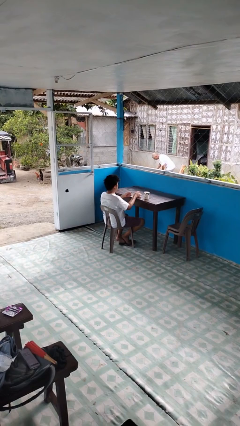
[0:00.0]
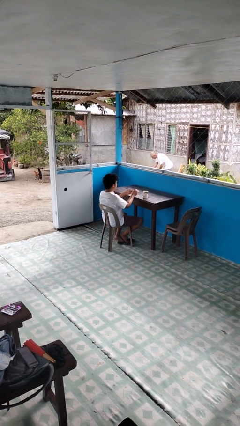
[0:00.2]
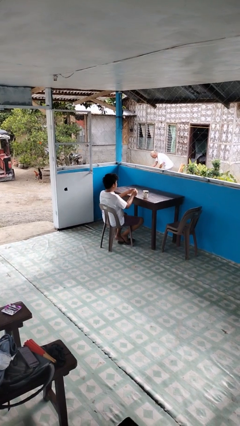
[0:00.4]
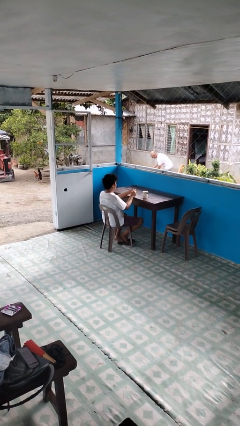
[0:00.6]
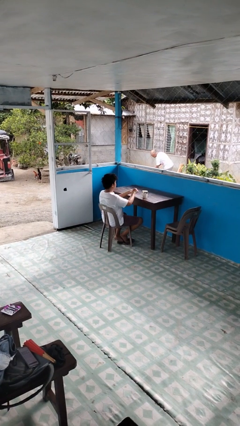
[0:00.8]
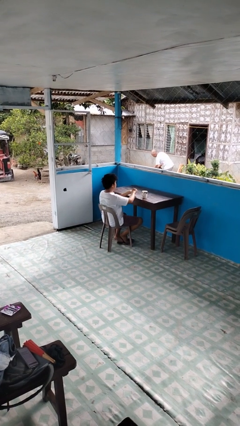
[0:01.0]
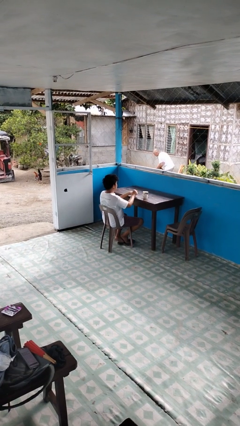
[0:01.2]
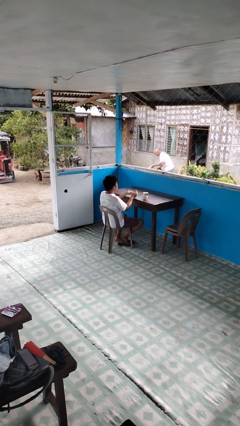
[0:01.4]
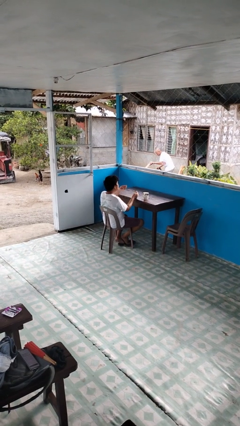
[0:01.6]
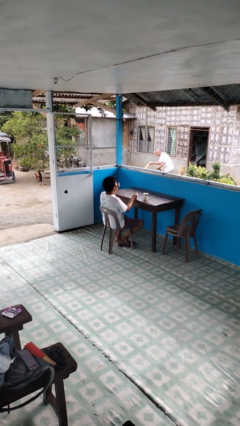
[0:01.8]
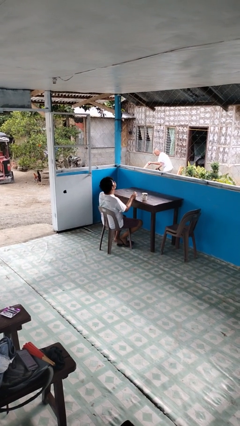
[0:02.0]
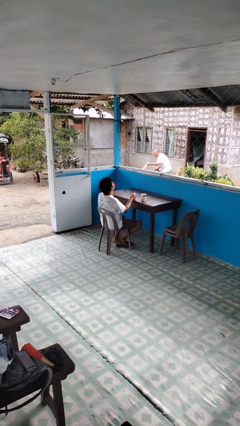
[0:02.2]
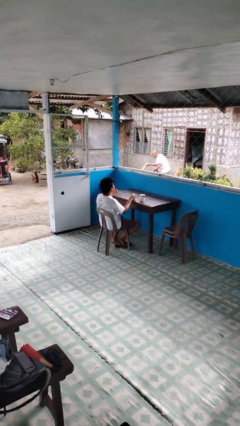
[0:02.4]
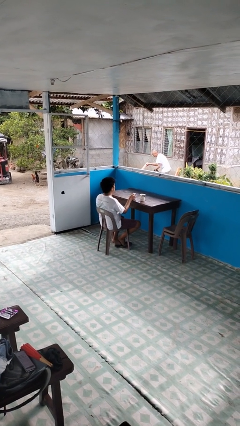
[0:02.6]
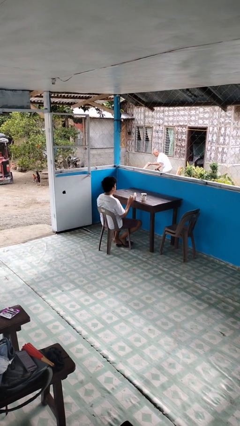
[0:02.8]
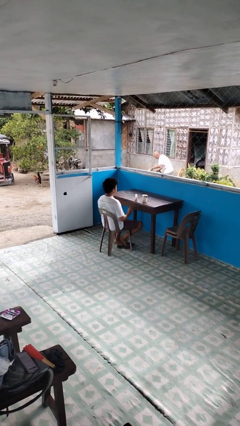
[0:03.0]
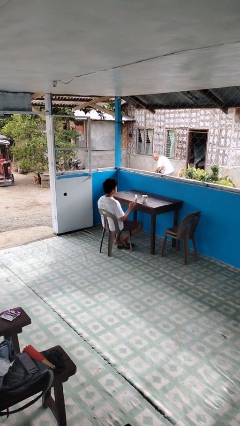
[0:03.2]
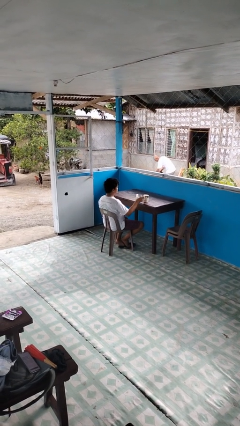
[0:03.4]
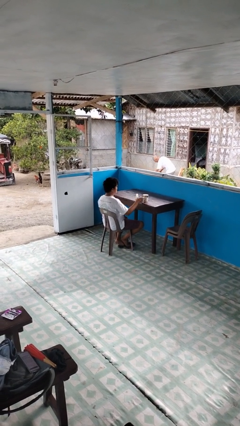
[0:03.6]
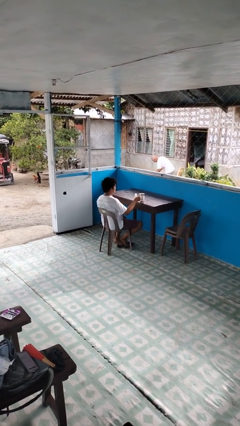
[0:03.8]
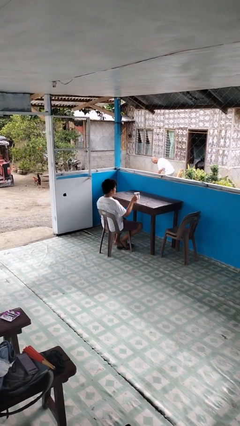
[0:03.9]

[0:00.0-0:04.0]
person takes medicine pills

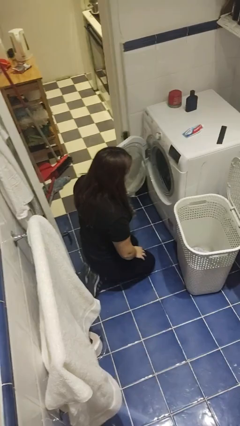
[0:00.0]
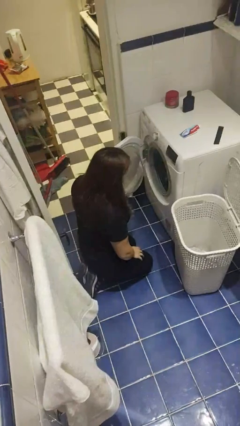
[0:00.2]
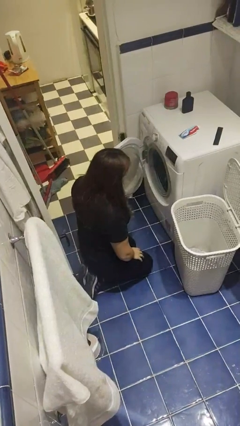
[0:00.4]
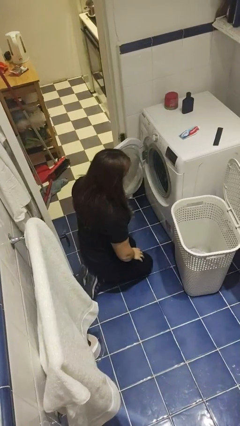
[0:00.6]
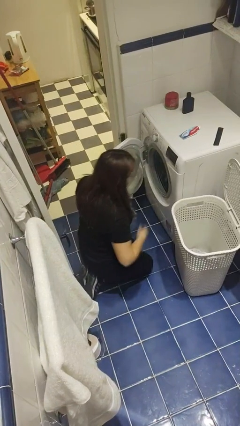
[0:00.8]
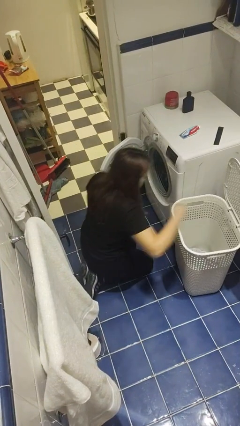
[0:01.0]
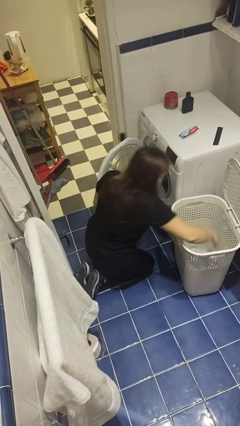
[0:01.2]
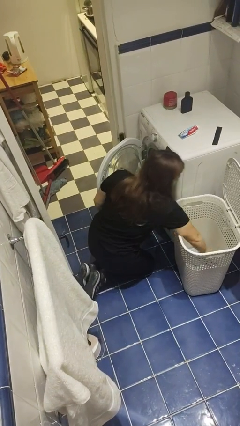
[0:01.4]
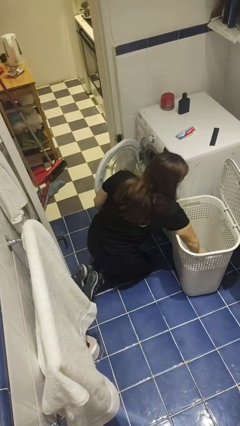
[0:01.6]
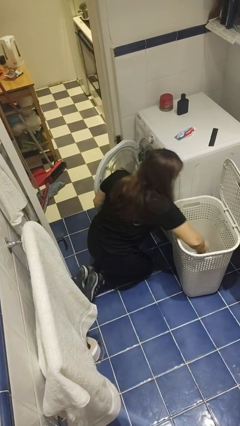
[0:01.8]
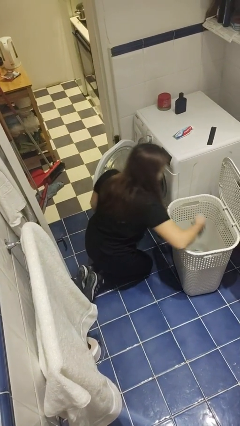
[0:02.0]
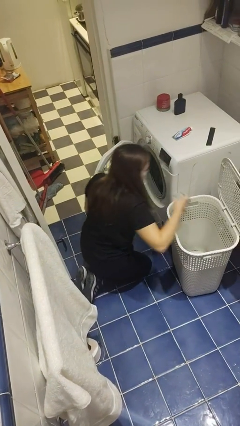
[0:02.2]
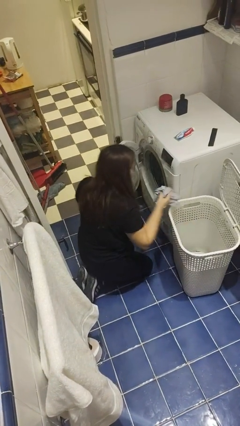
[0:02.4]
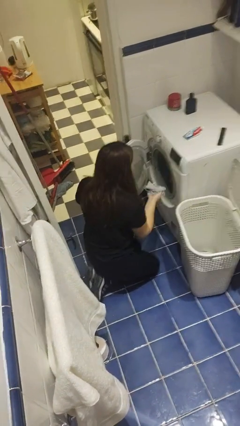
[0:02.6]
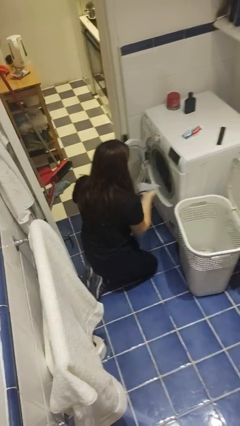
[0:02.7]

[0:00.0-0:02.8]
person unloads clotheswasher

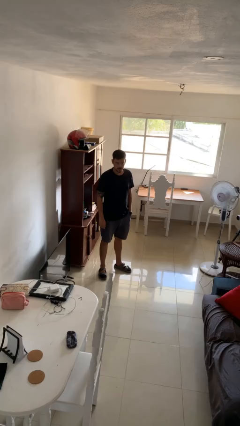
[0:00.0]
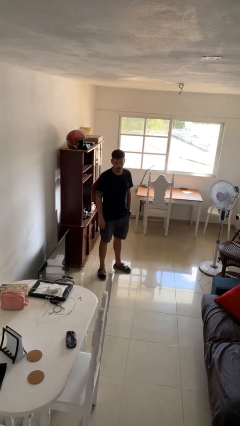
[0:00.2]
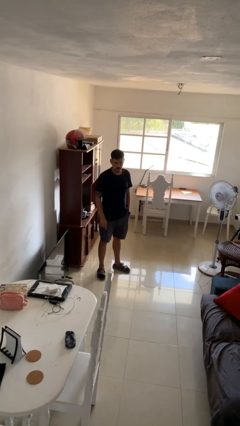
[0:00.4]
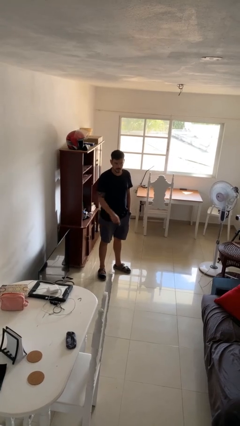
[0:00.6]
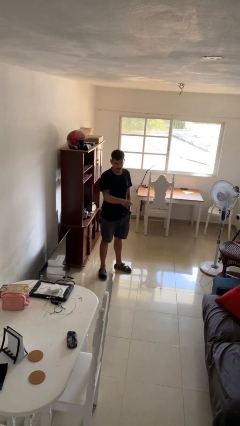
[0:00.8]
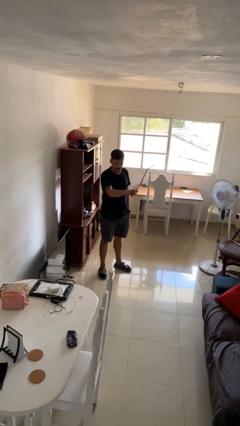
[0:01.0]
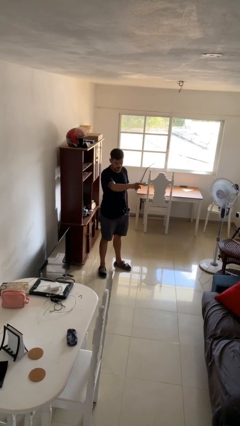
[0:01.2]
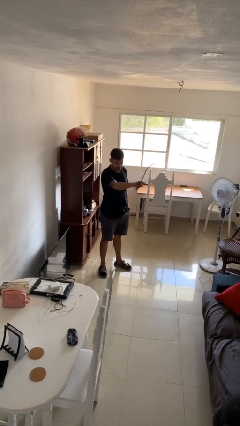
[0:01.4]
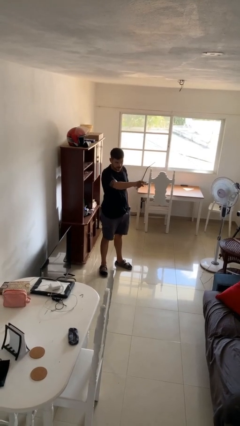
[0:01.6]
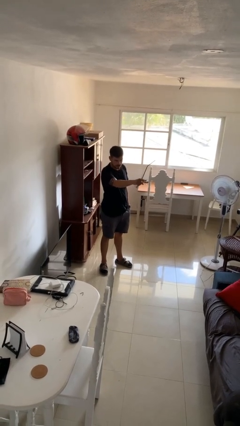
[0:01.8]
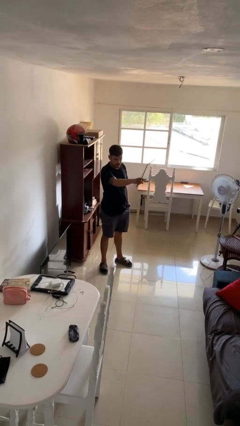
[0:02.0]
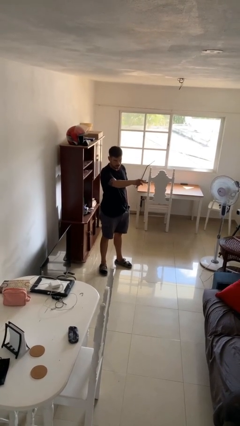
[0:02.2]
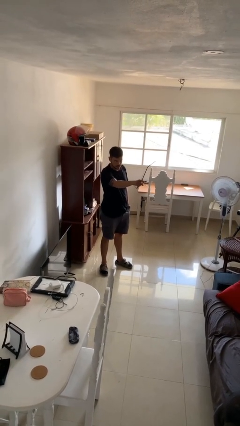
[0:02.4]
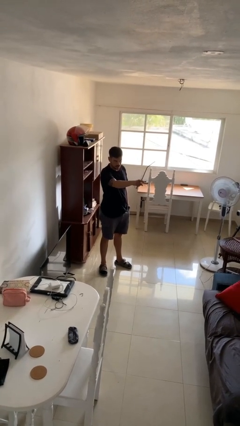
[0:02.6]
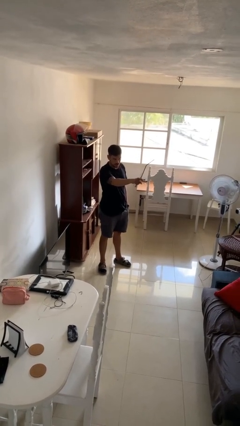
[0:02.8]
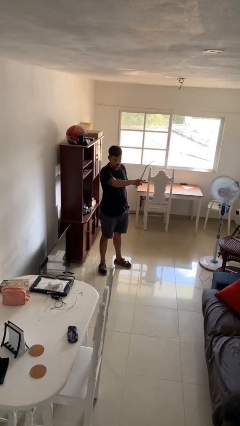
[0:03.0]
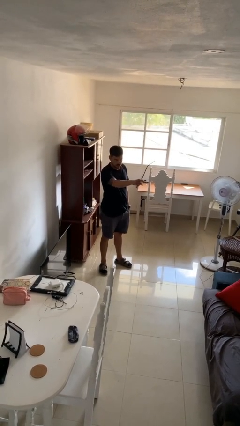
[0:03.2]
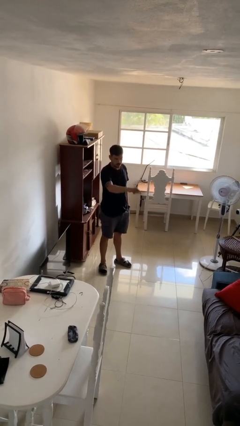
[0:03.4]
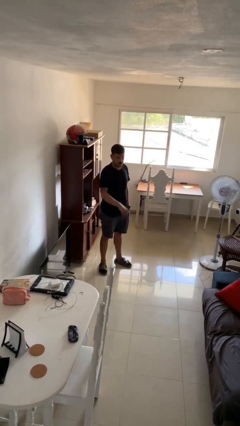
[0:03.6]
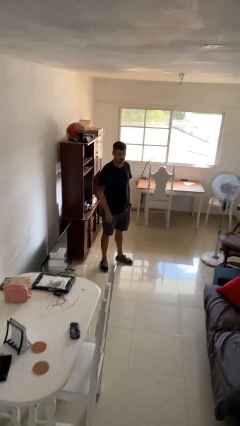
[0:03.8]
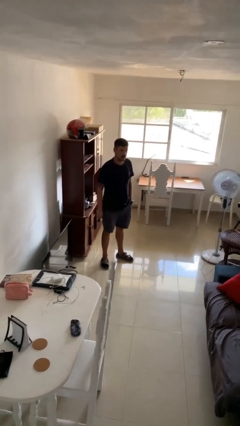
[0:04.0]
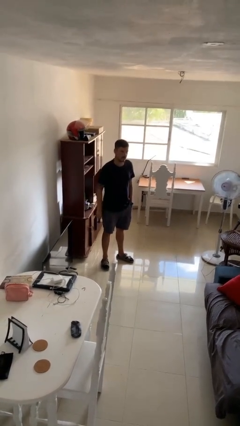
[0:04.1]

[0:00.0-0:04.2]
person points at person

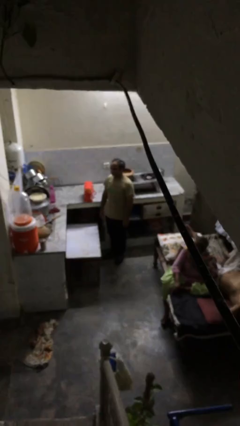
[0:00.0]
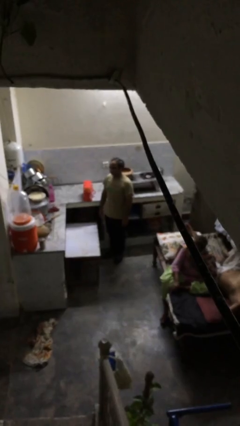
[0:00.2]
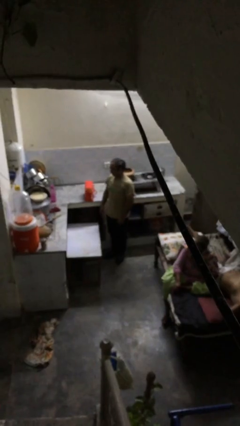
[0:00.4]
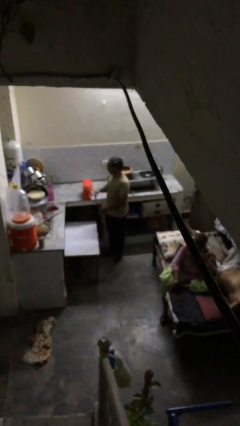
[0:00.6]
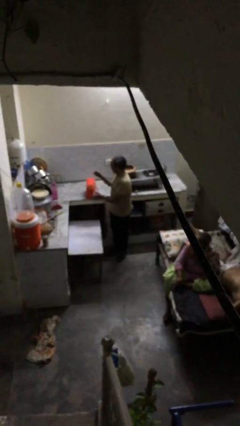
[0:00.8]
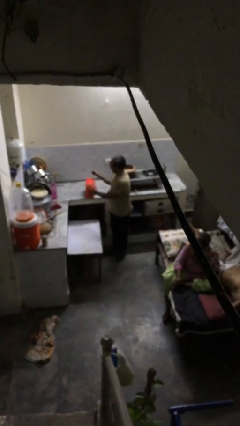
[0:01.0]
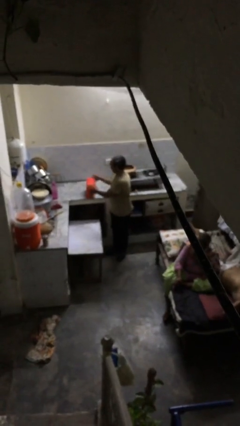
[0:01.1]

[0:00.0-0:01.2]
person picks up object from shelf

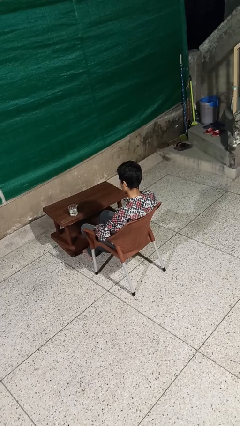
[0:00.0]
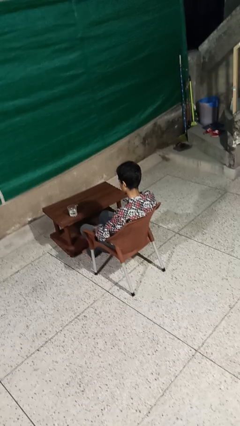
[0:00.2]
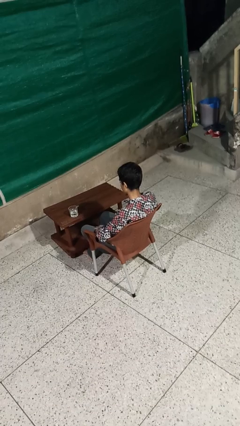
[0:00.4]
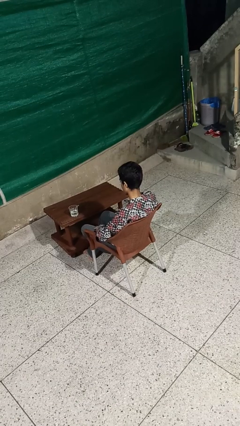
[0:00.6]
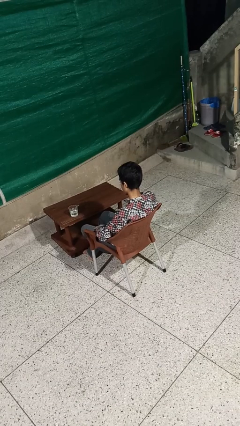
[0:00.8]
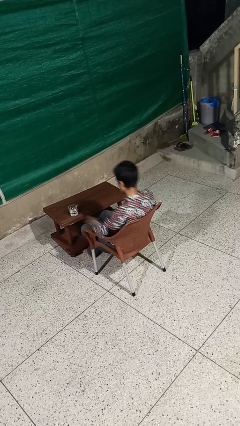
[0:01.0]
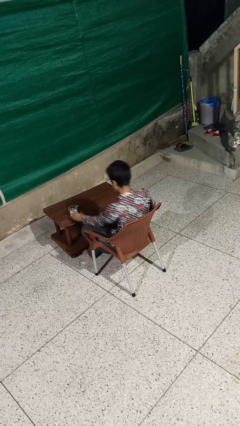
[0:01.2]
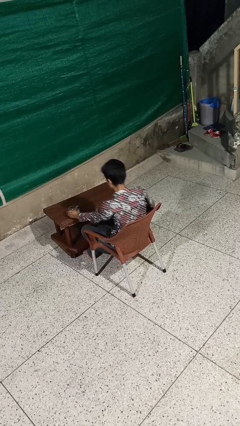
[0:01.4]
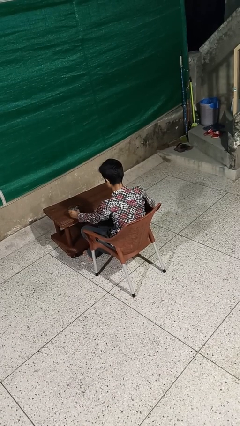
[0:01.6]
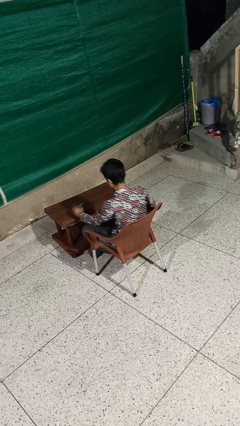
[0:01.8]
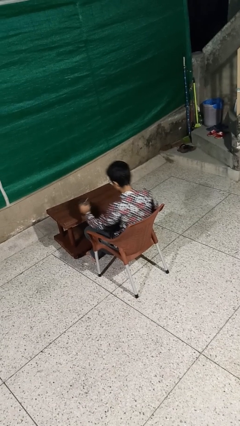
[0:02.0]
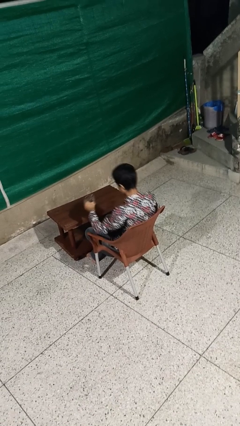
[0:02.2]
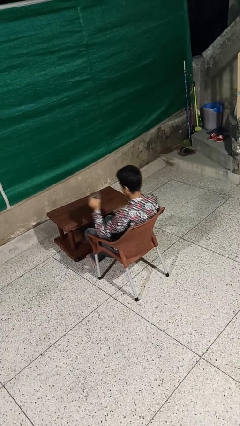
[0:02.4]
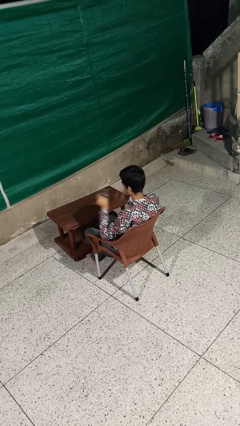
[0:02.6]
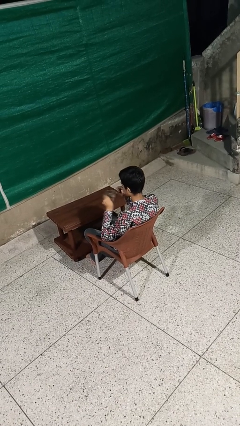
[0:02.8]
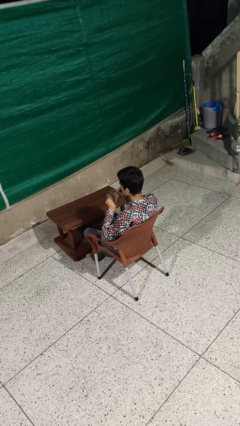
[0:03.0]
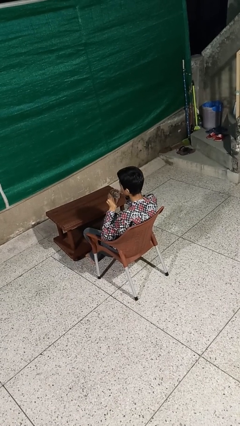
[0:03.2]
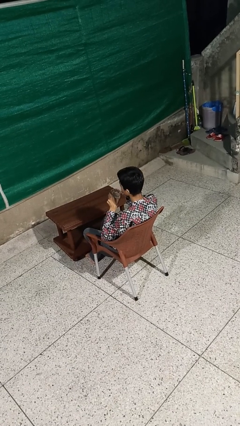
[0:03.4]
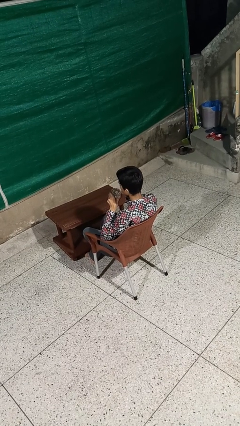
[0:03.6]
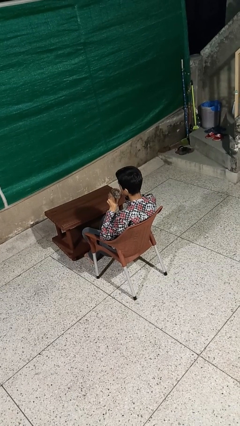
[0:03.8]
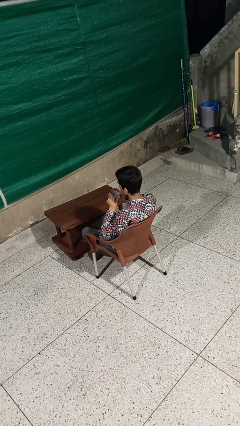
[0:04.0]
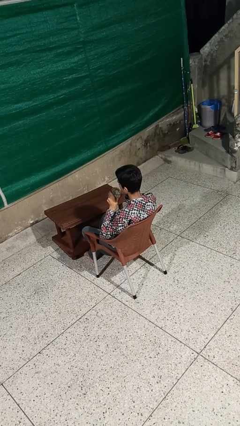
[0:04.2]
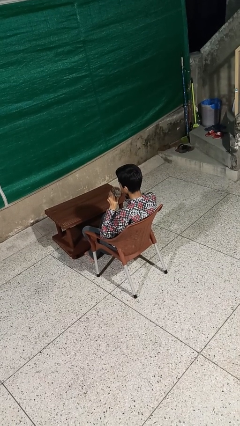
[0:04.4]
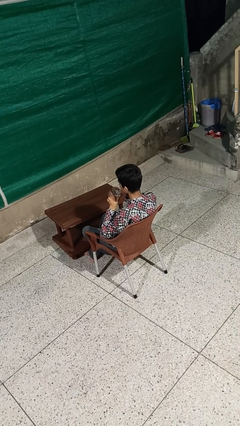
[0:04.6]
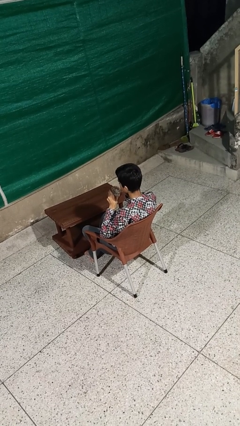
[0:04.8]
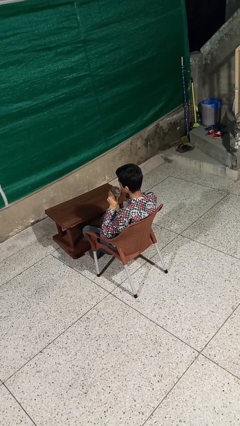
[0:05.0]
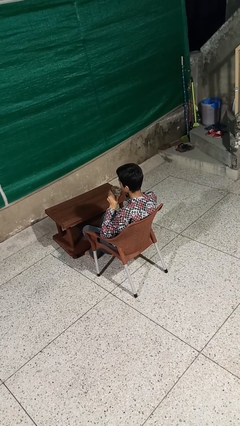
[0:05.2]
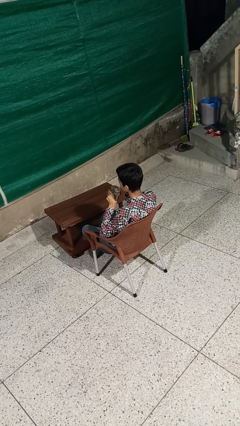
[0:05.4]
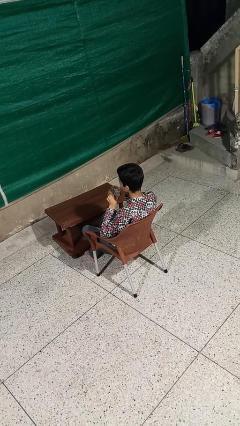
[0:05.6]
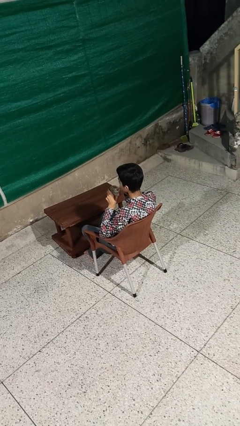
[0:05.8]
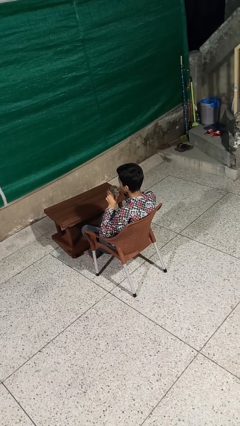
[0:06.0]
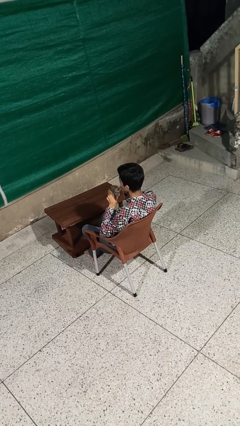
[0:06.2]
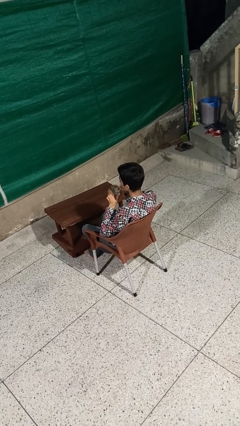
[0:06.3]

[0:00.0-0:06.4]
person drinks from straw
